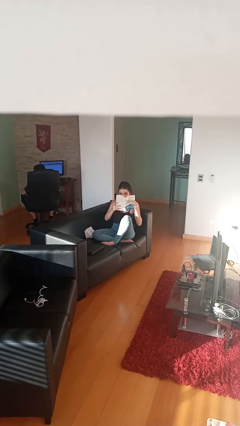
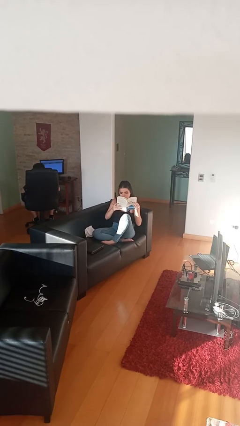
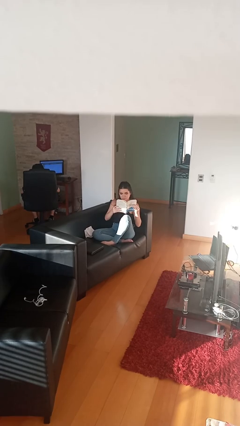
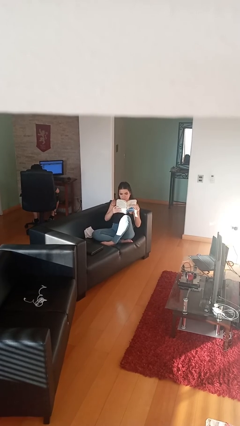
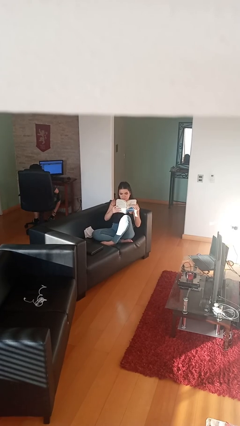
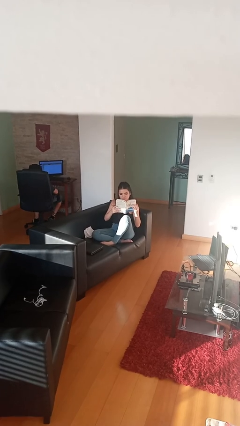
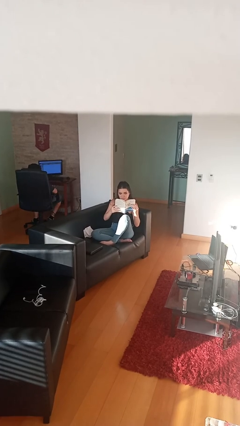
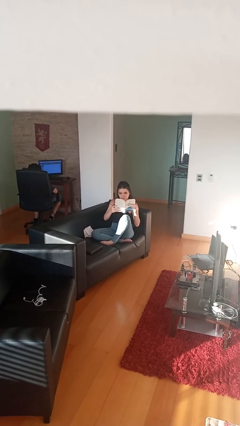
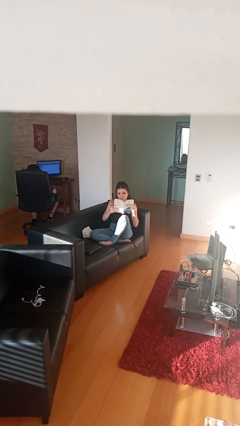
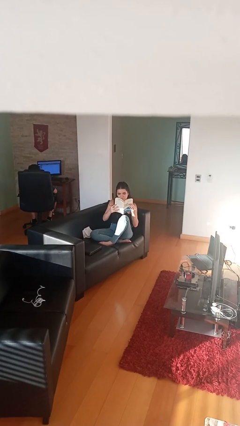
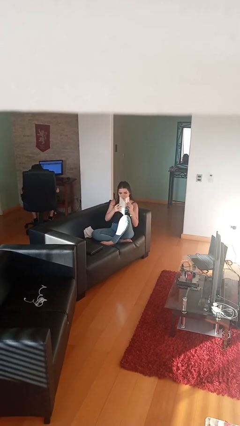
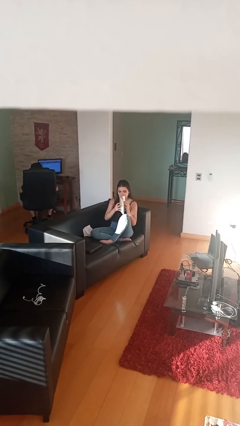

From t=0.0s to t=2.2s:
person reads document

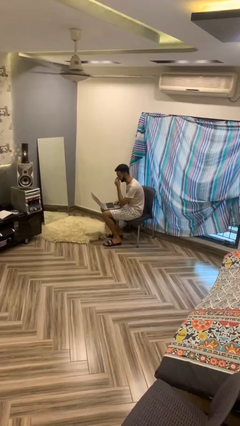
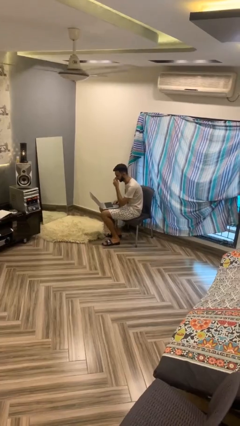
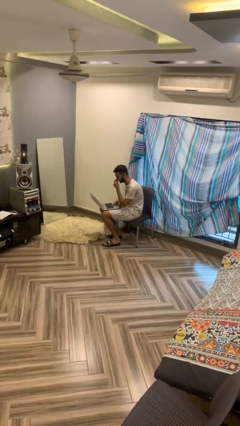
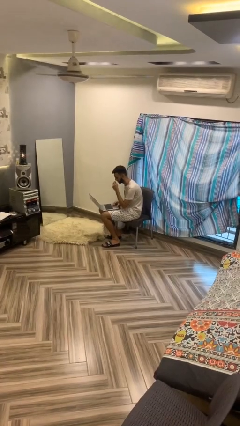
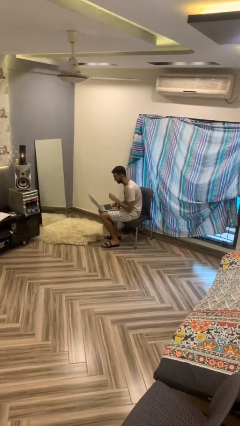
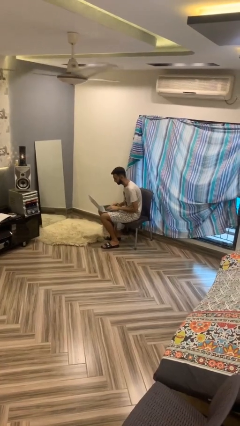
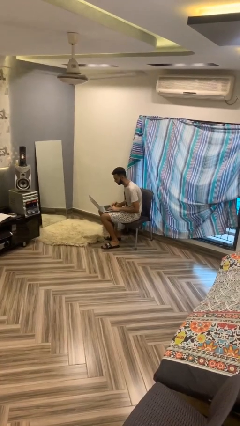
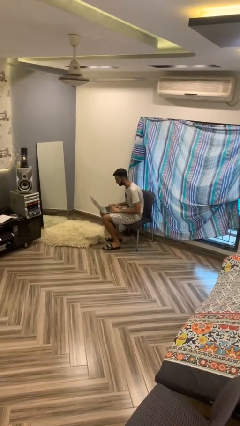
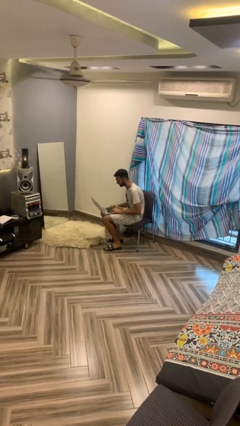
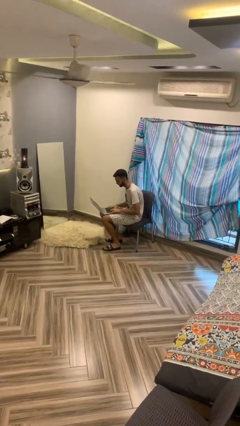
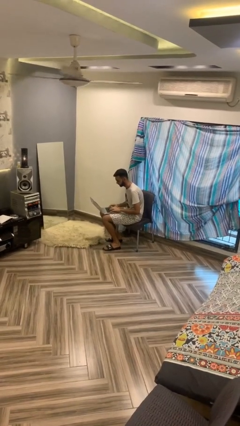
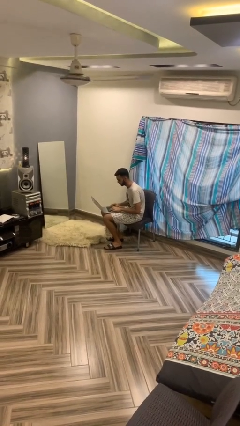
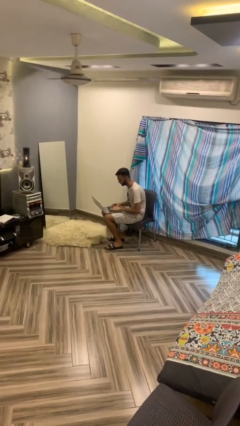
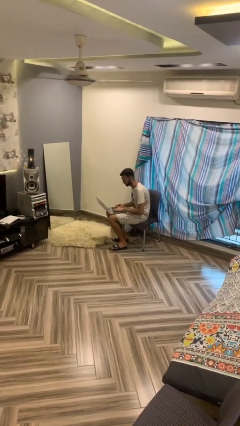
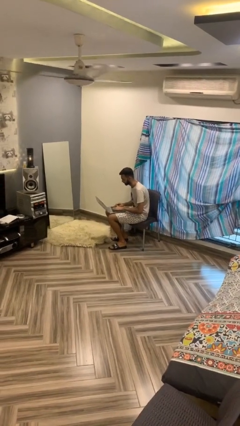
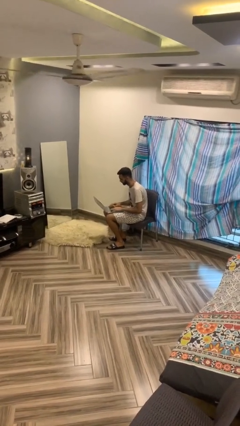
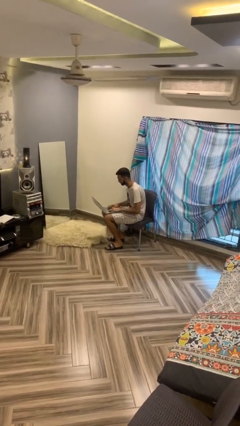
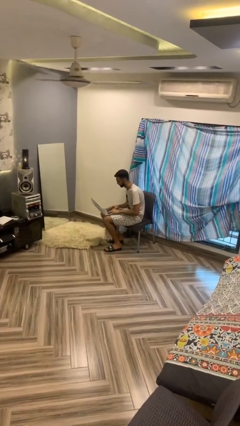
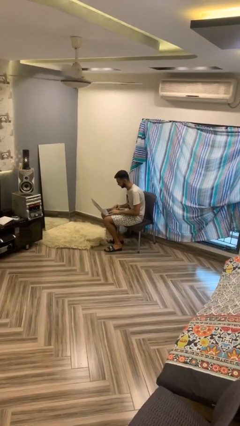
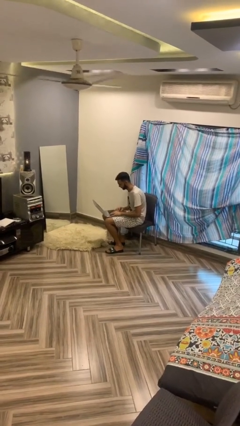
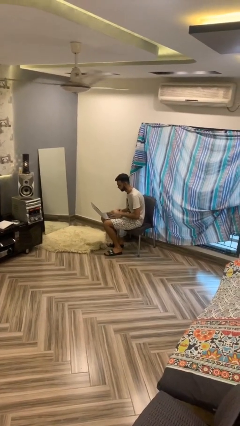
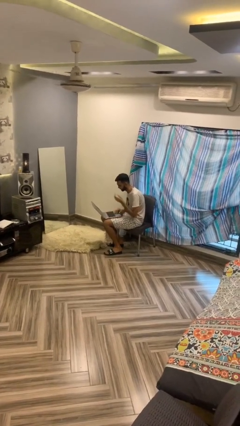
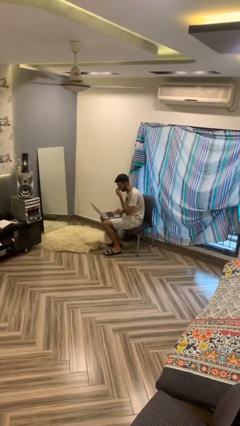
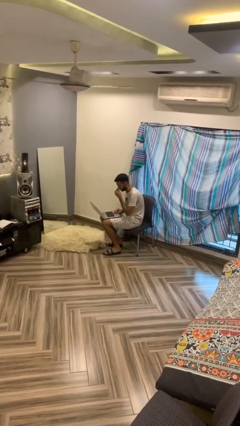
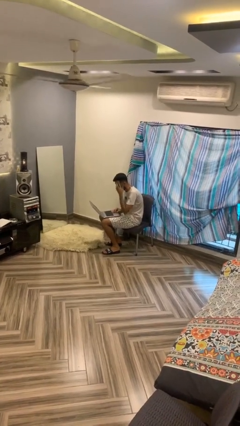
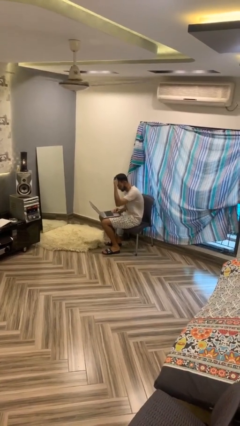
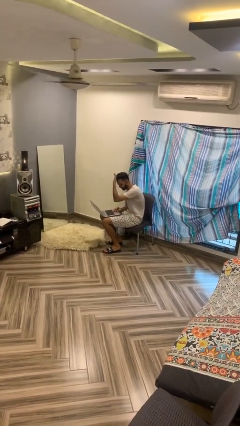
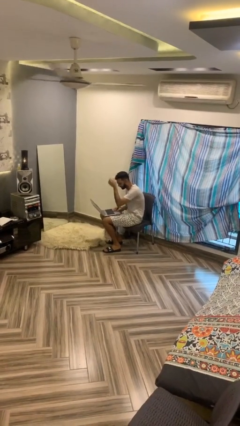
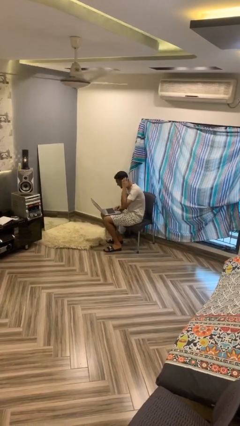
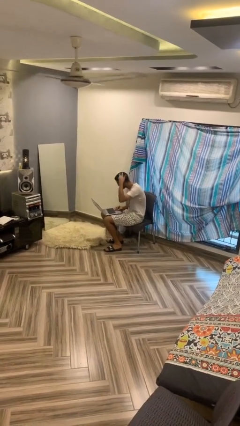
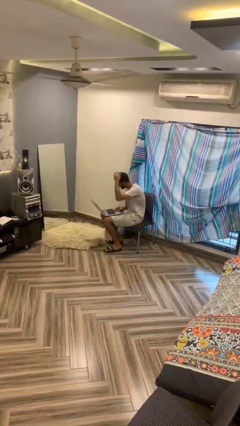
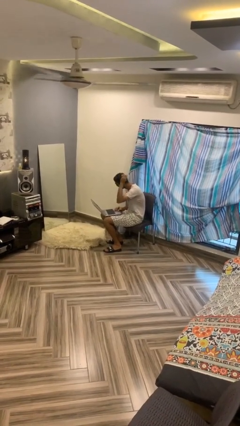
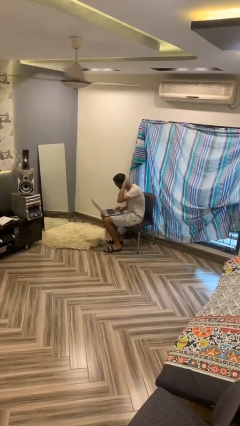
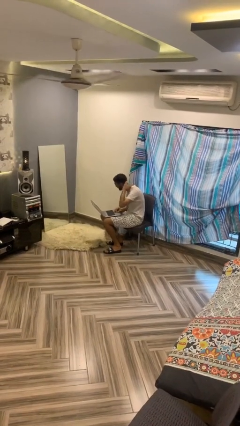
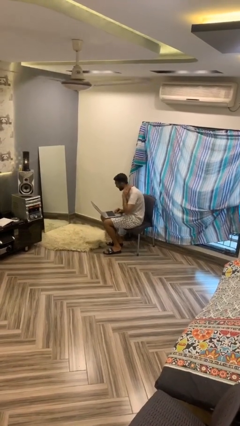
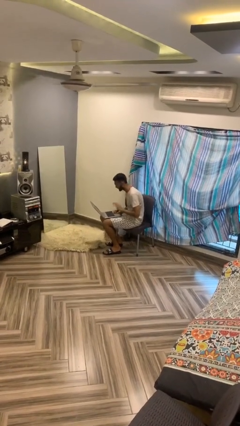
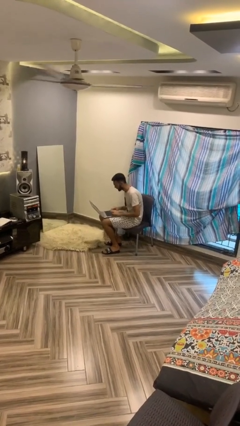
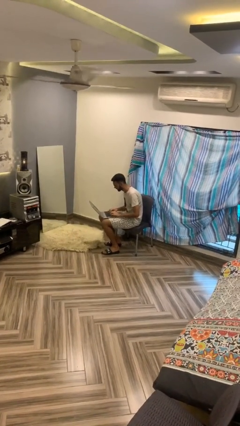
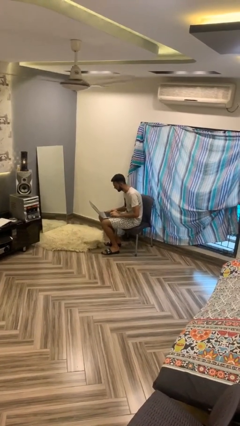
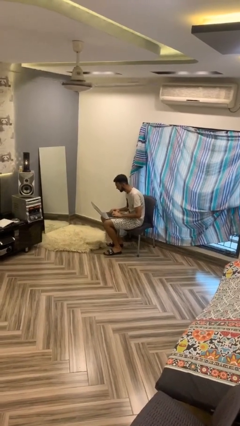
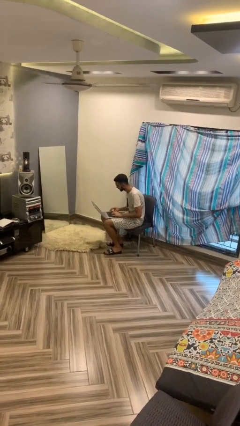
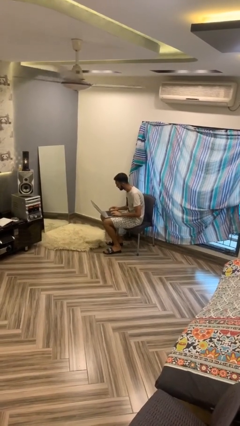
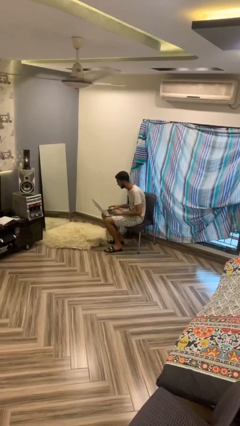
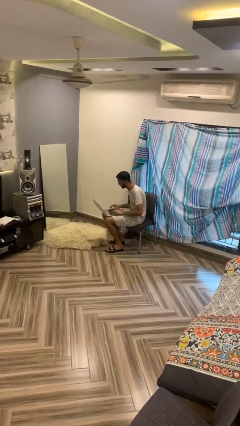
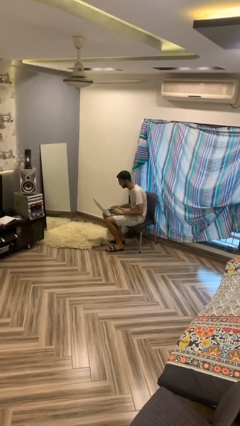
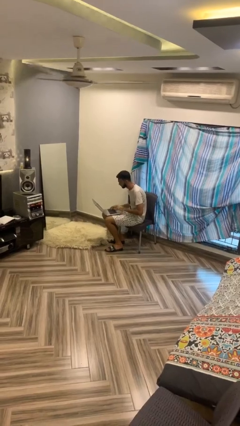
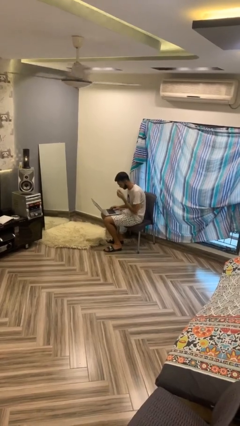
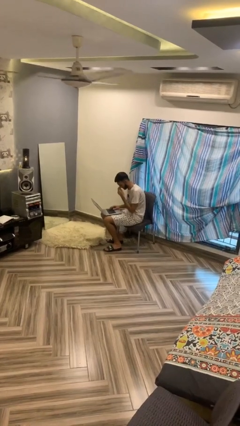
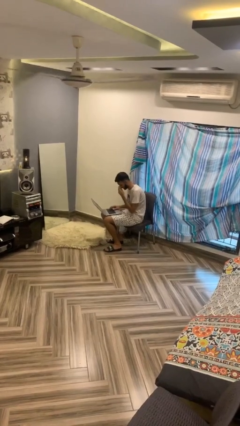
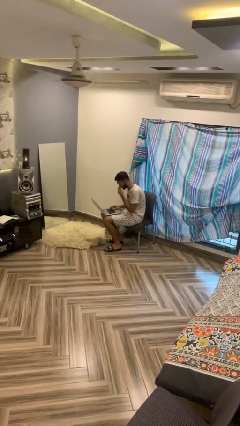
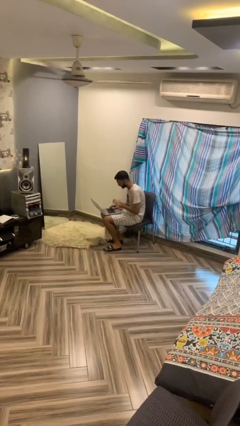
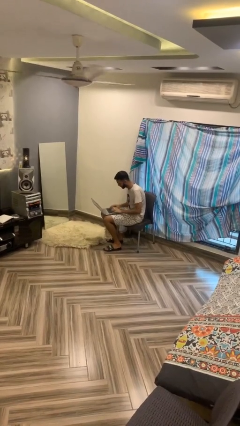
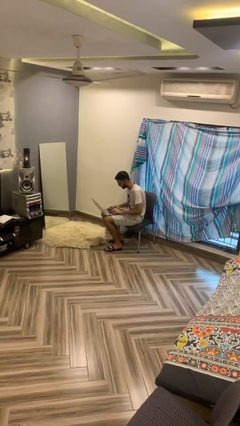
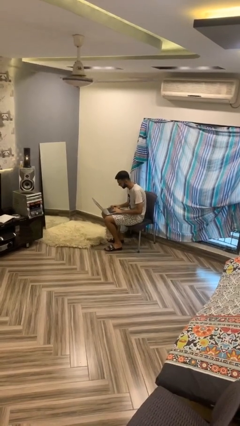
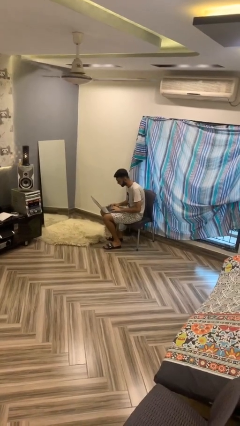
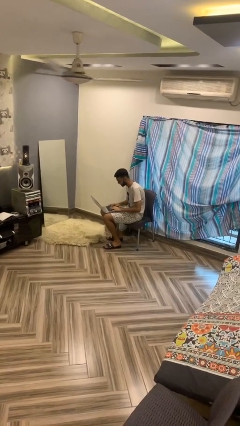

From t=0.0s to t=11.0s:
person interacts with laptop

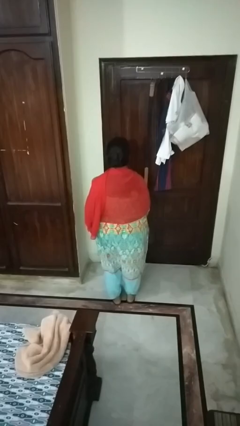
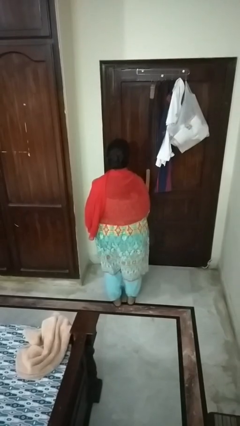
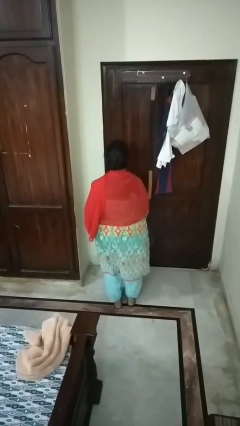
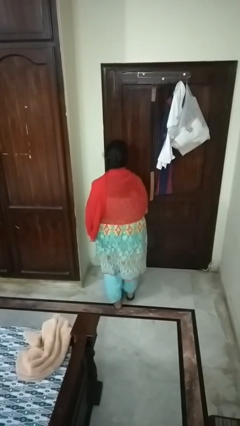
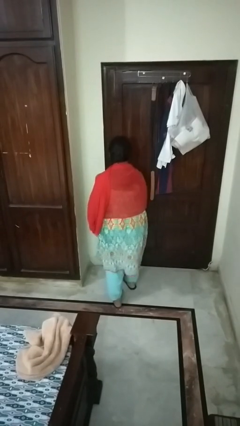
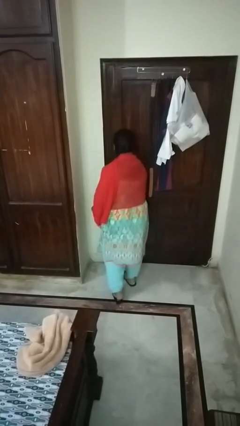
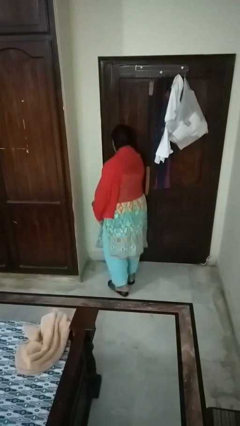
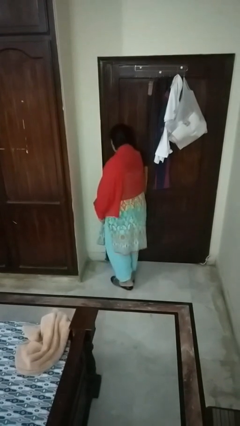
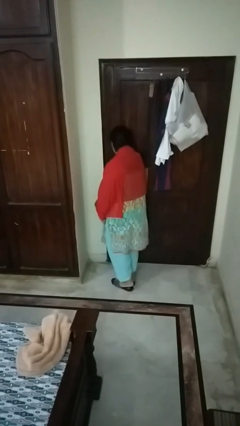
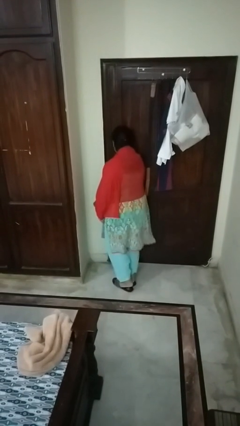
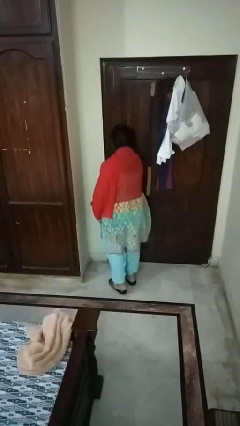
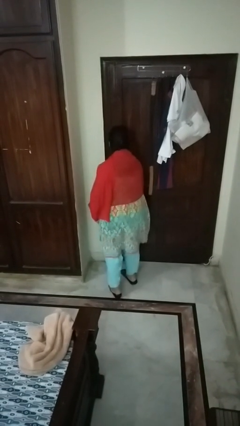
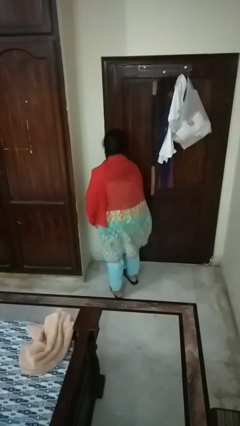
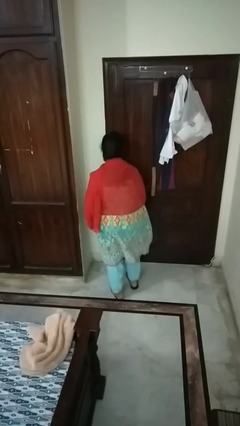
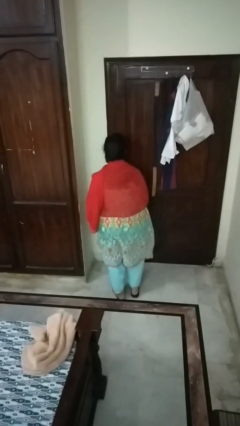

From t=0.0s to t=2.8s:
person bumps into wall

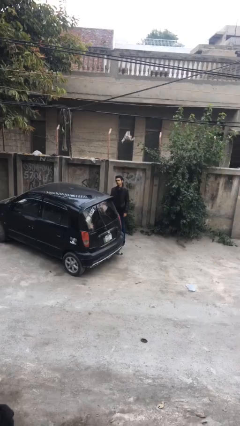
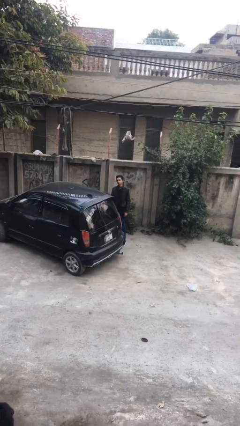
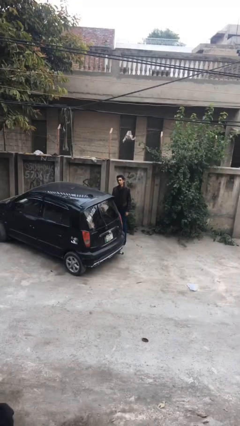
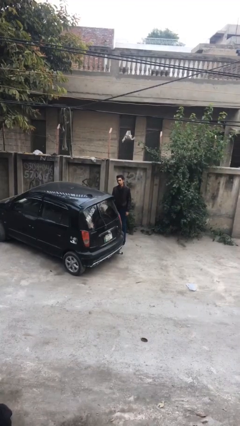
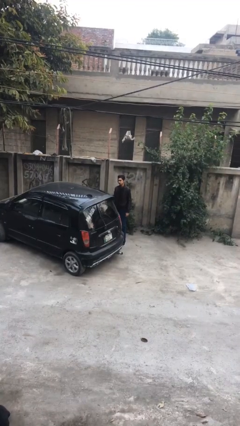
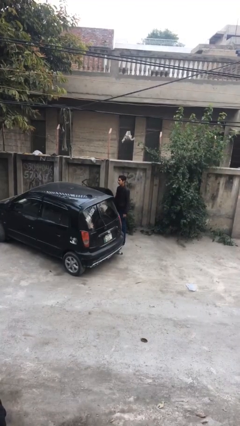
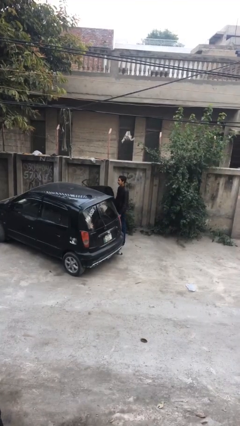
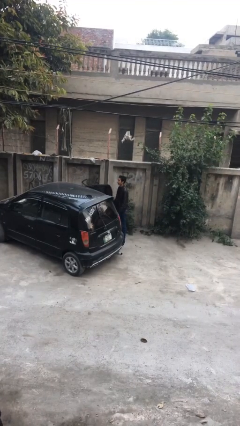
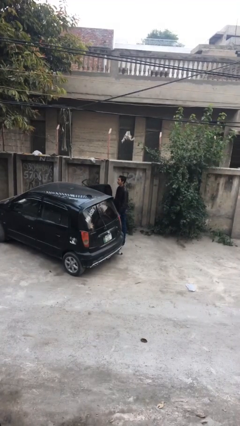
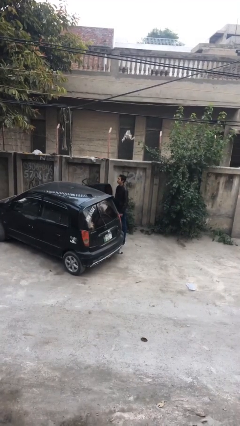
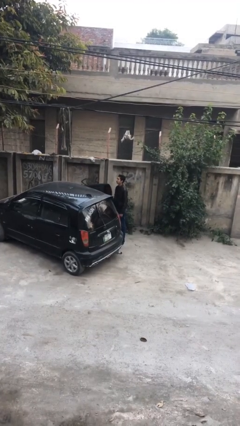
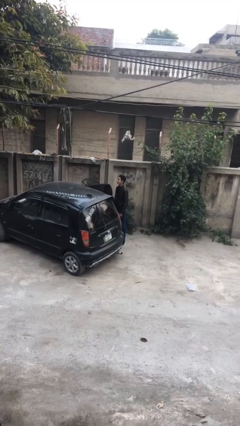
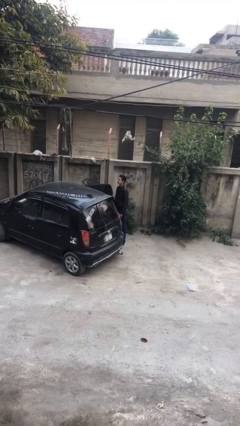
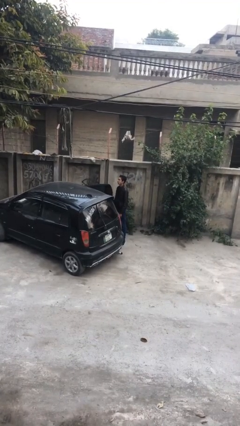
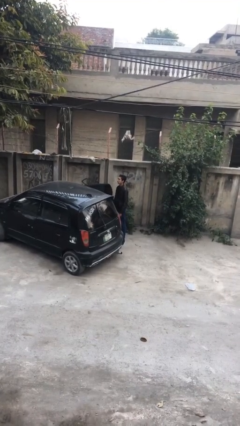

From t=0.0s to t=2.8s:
person opens car door
